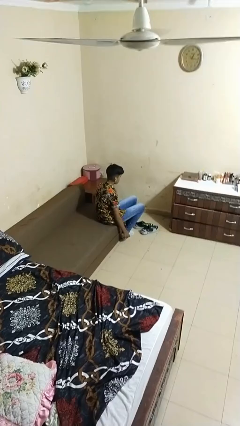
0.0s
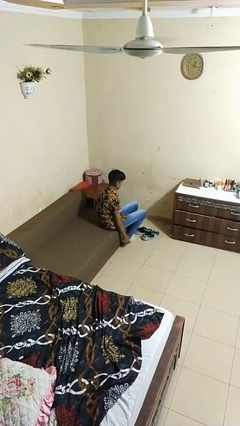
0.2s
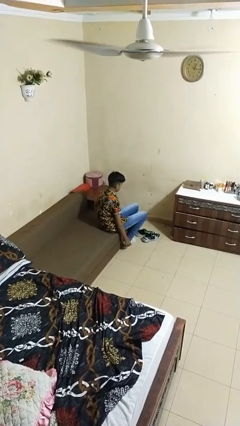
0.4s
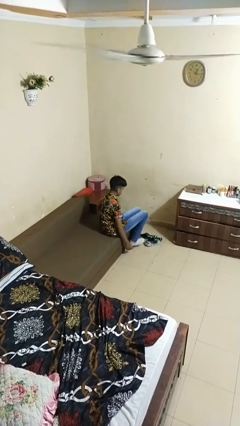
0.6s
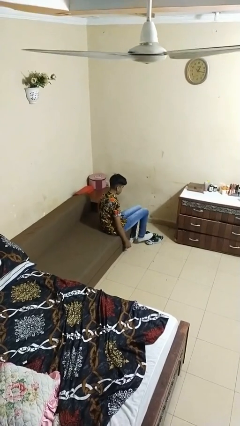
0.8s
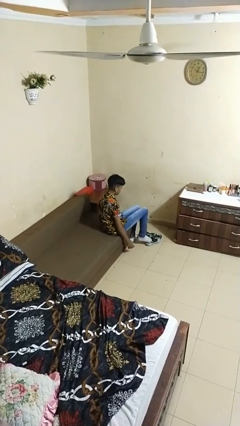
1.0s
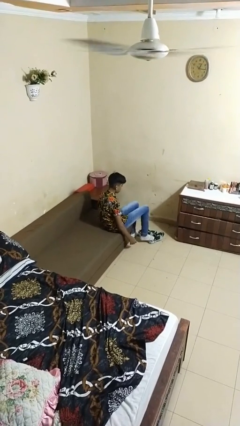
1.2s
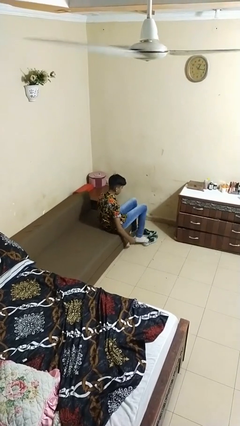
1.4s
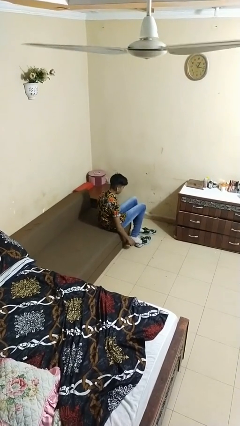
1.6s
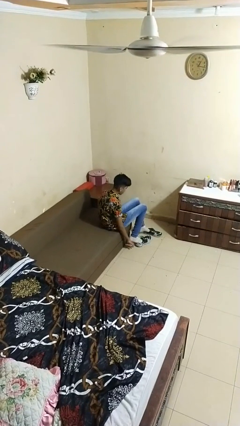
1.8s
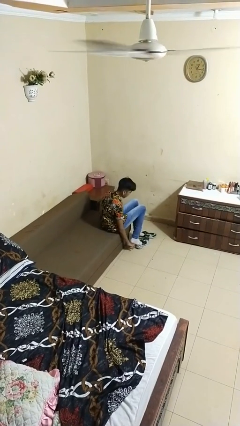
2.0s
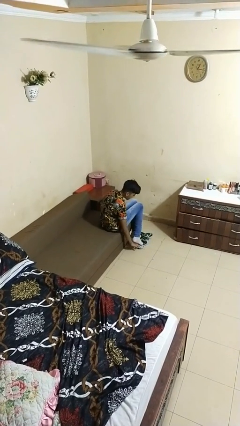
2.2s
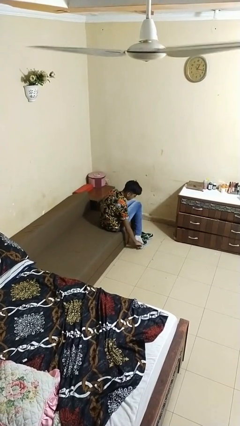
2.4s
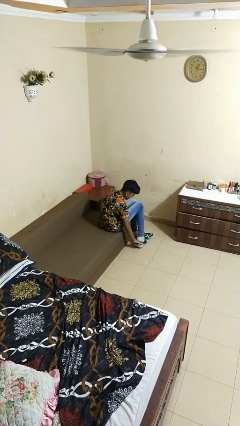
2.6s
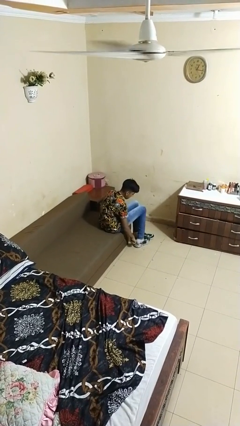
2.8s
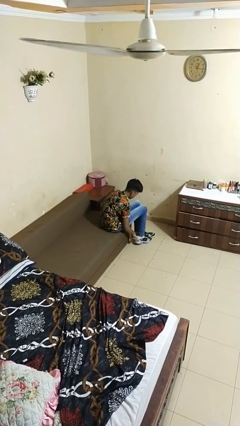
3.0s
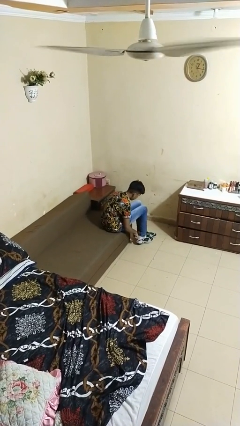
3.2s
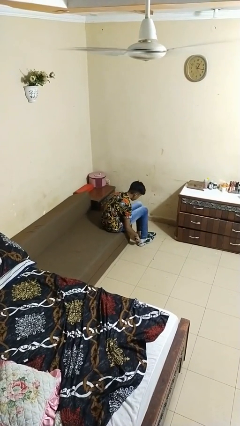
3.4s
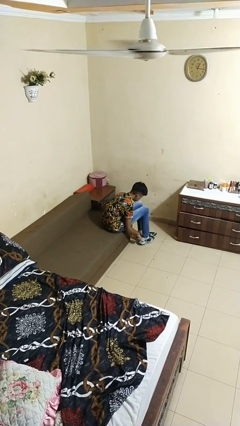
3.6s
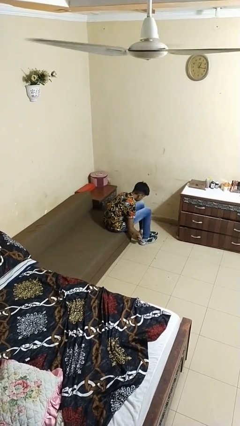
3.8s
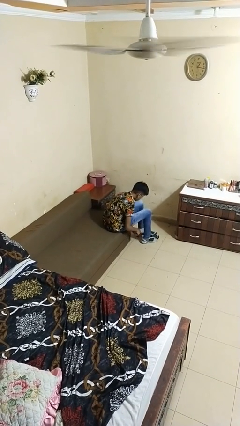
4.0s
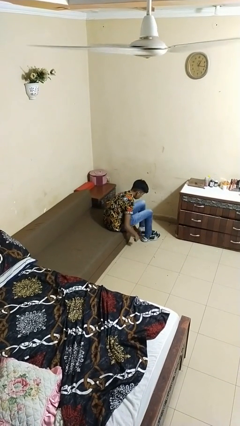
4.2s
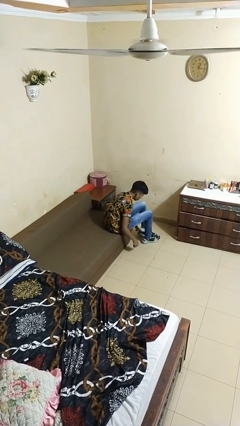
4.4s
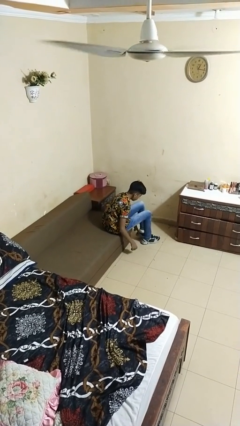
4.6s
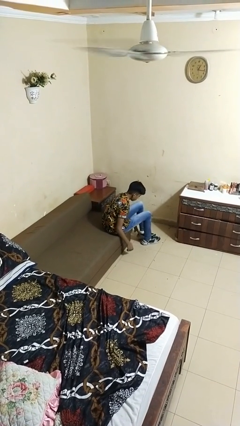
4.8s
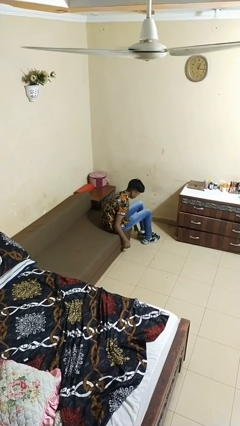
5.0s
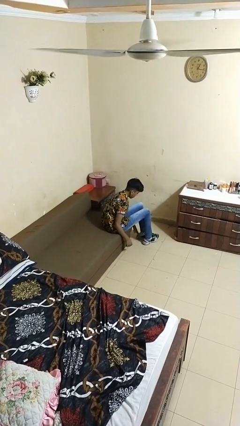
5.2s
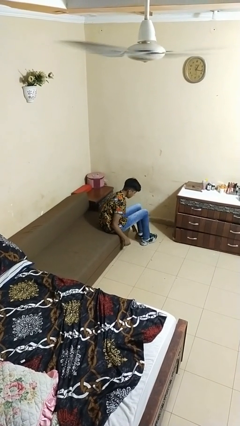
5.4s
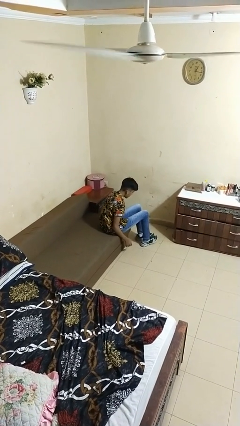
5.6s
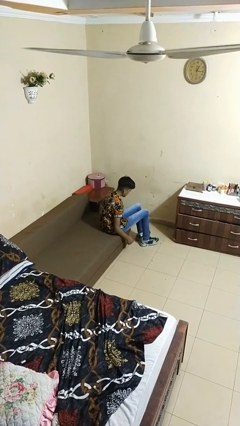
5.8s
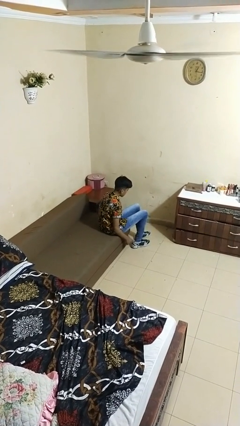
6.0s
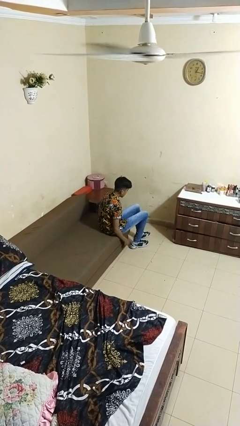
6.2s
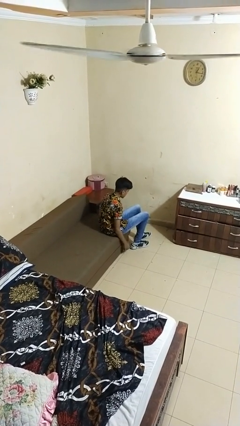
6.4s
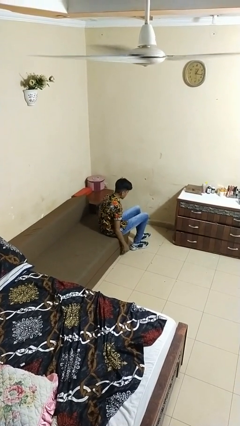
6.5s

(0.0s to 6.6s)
person puts on shoes

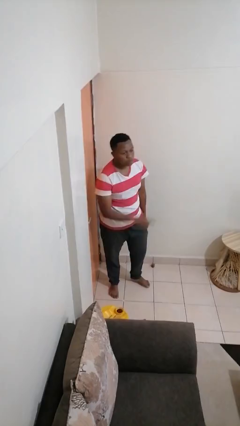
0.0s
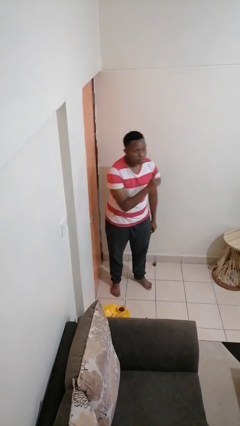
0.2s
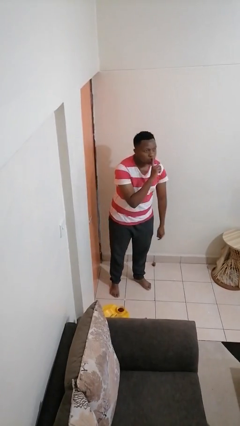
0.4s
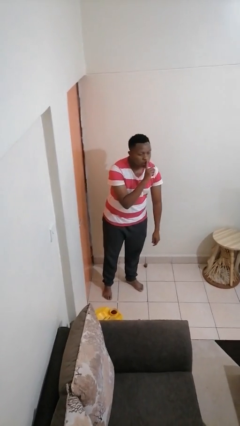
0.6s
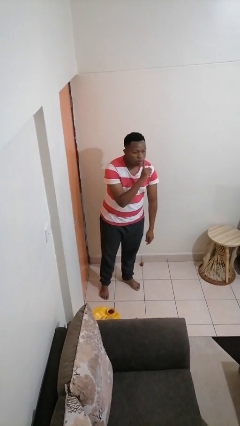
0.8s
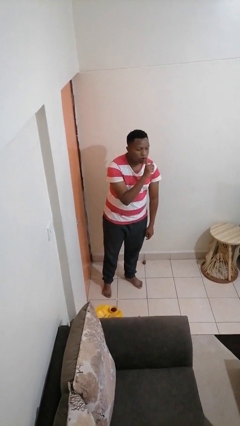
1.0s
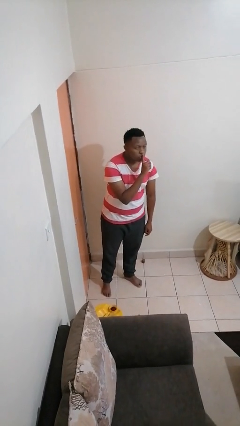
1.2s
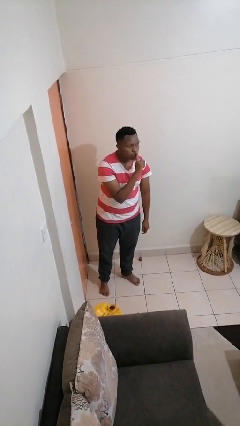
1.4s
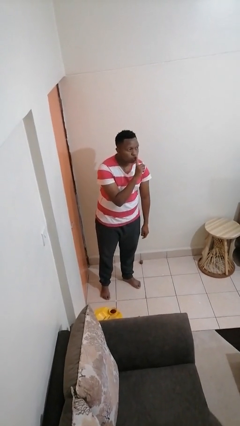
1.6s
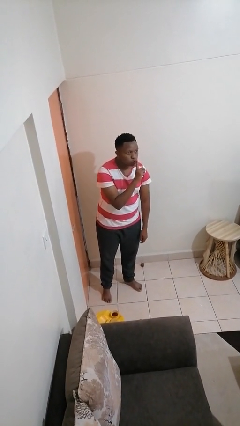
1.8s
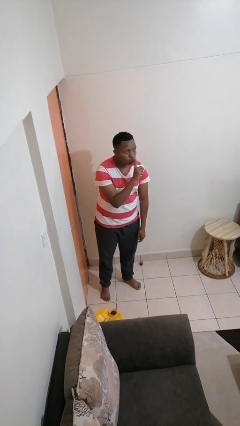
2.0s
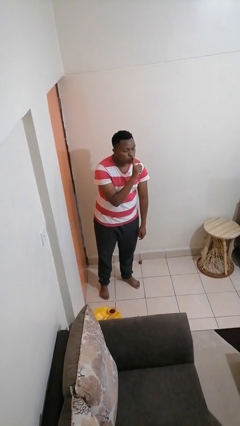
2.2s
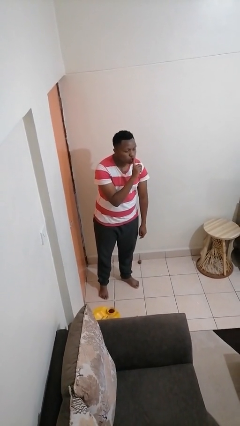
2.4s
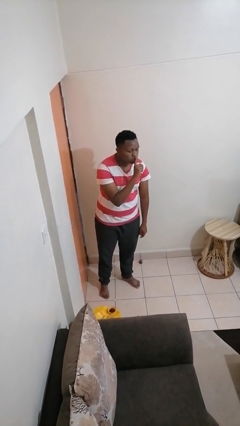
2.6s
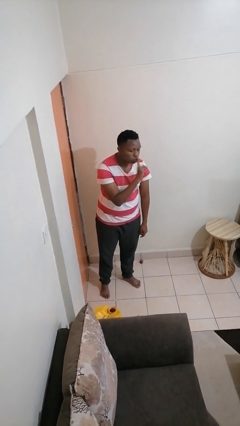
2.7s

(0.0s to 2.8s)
person gestures be quiet

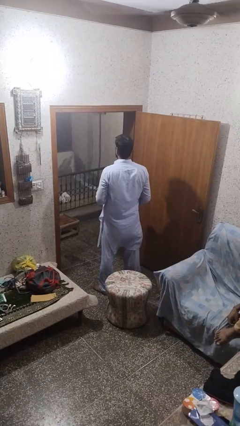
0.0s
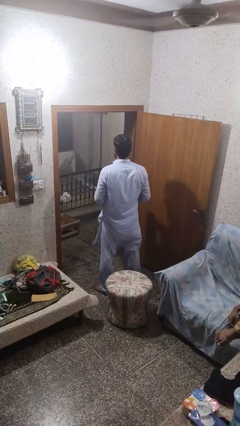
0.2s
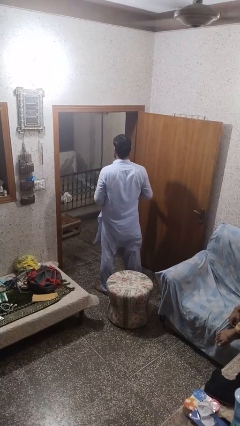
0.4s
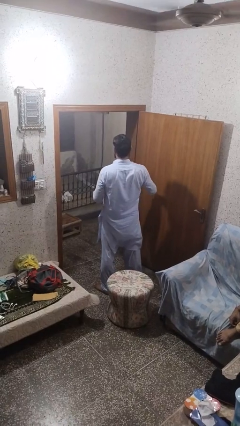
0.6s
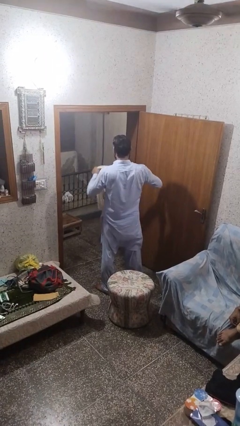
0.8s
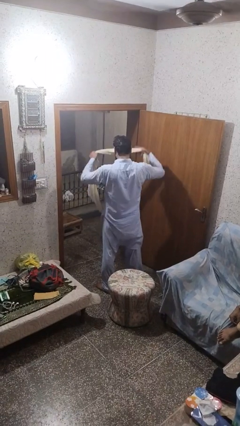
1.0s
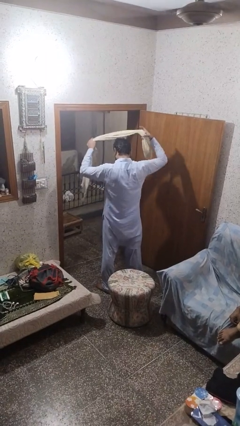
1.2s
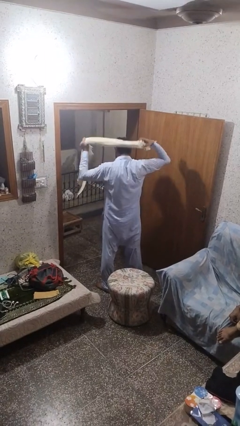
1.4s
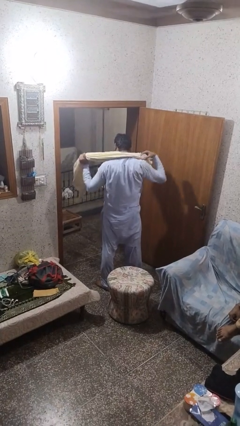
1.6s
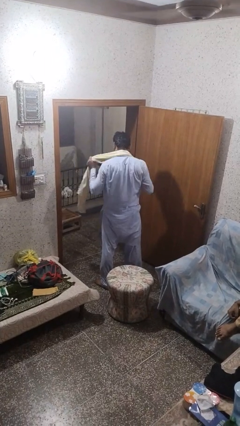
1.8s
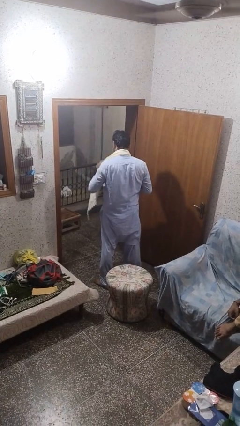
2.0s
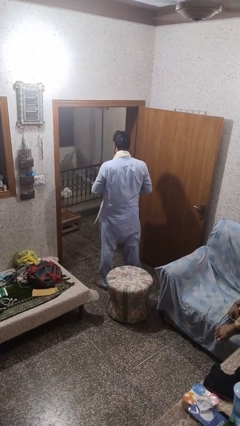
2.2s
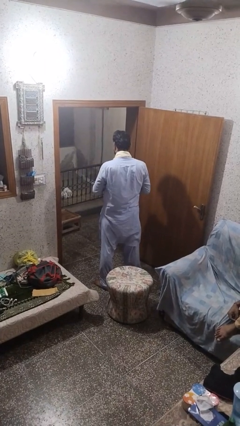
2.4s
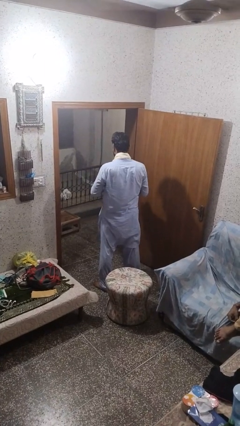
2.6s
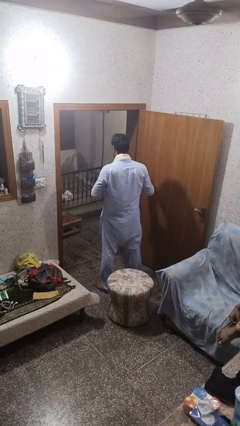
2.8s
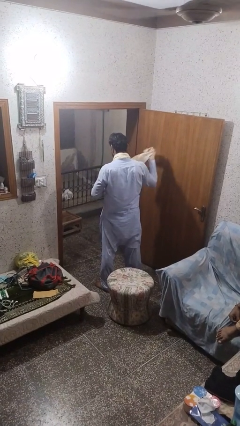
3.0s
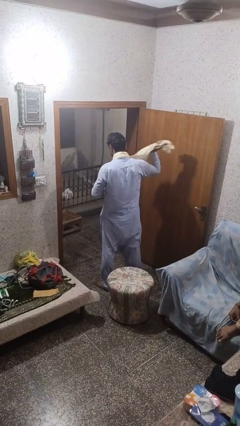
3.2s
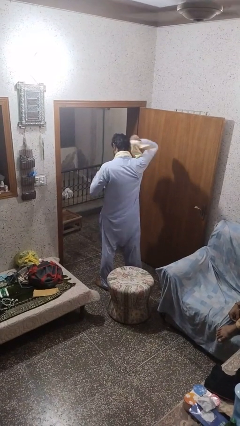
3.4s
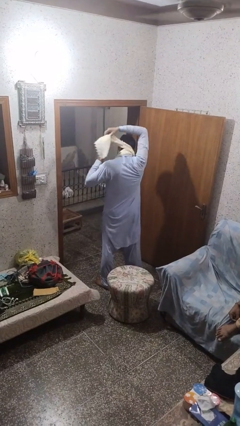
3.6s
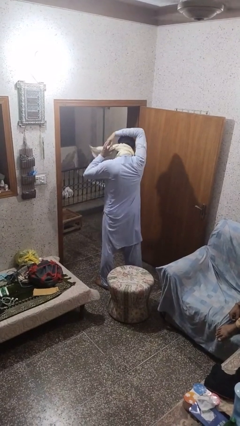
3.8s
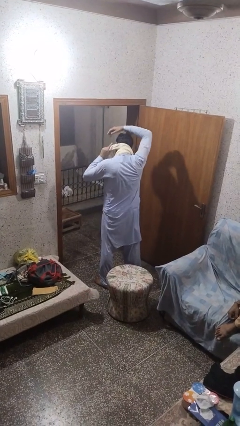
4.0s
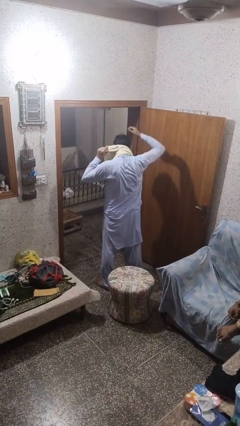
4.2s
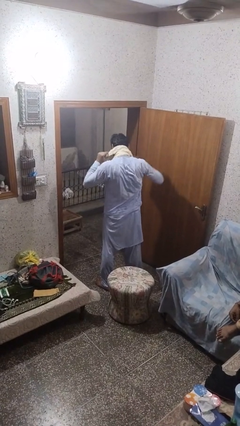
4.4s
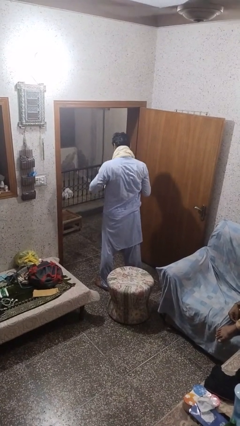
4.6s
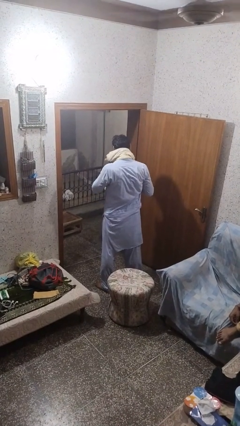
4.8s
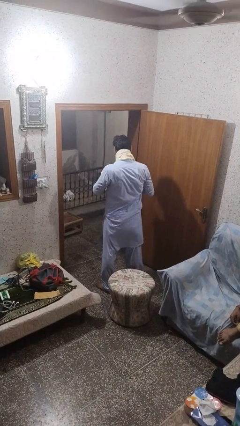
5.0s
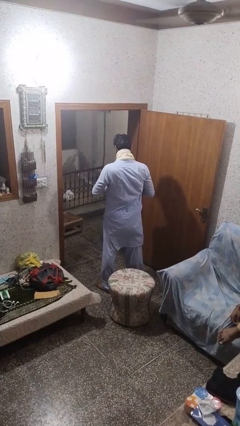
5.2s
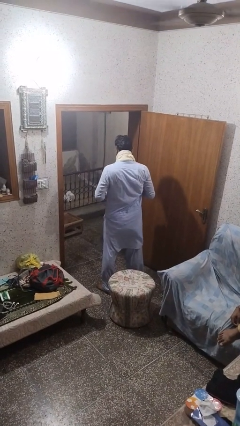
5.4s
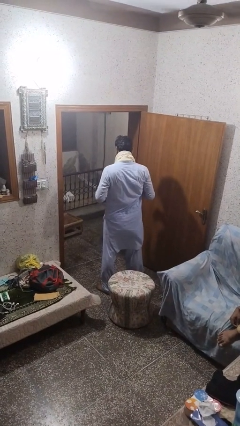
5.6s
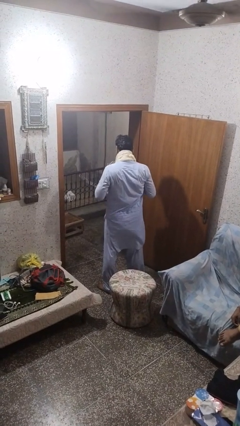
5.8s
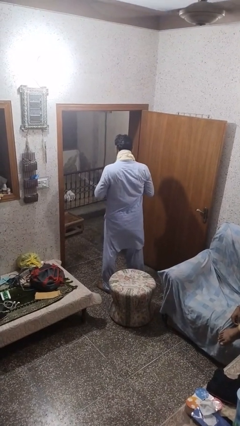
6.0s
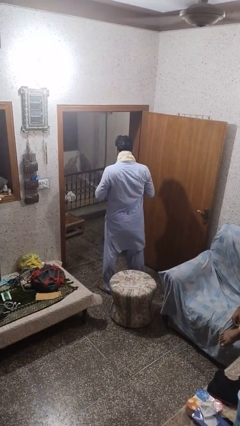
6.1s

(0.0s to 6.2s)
person puts on scarf

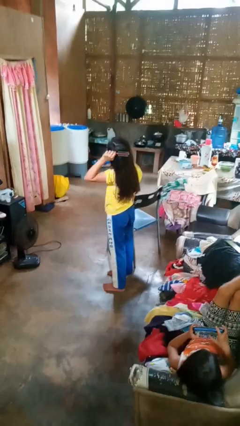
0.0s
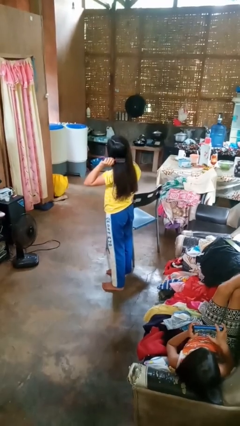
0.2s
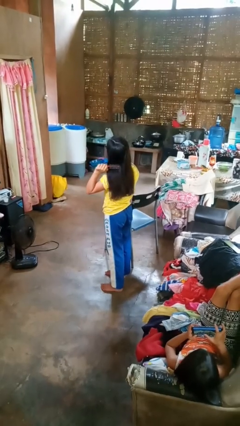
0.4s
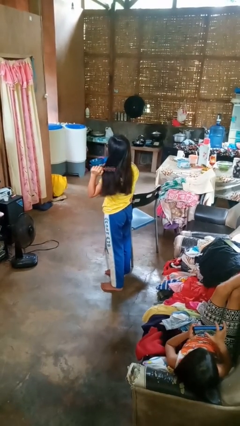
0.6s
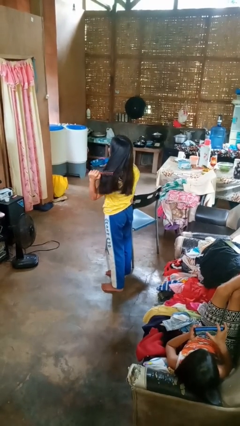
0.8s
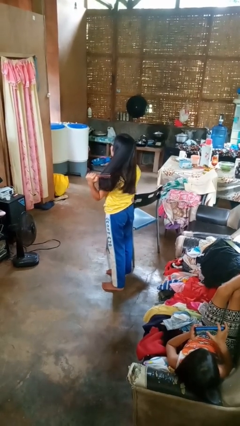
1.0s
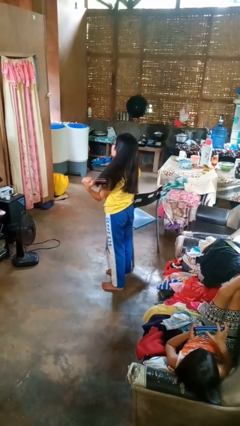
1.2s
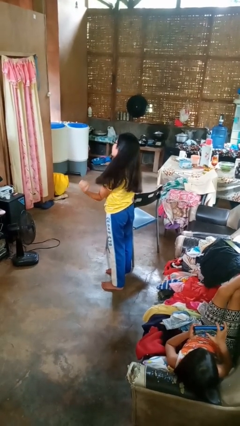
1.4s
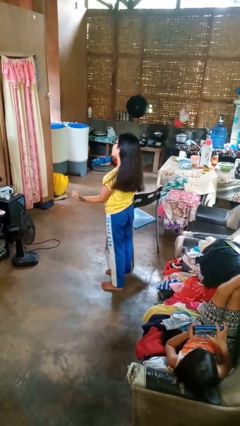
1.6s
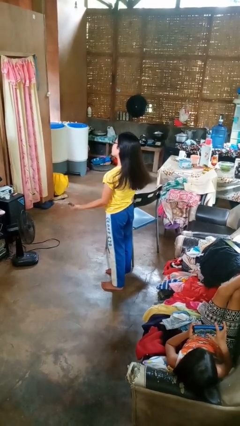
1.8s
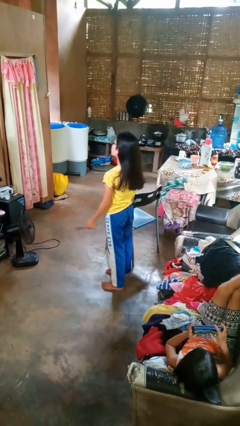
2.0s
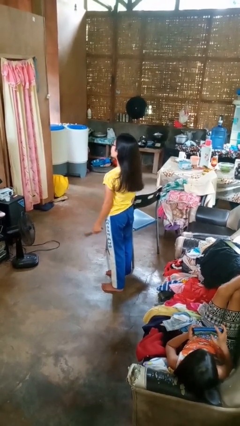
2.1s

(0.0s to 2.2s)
person brushes hair

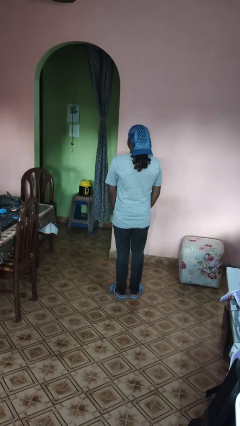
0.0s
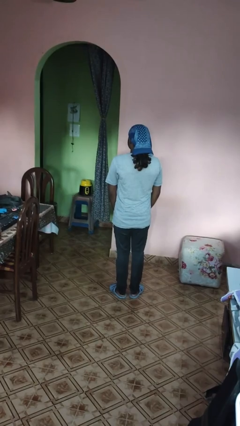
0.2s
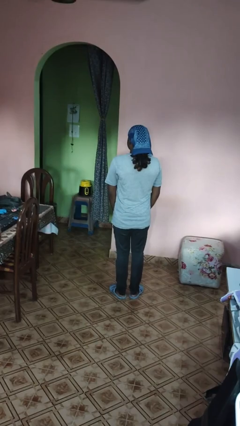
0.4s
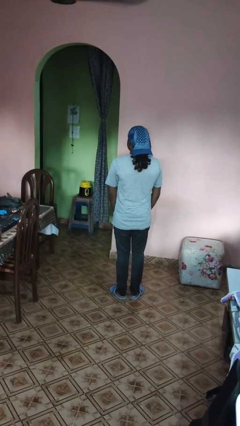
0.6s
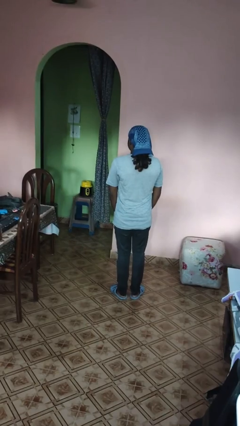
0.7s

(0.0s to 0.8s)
person takes off headphones
